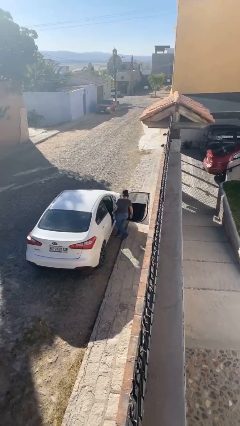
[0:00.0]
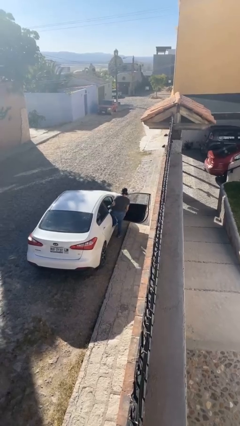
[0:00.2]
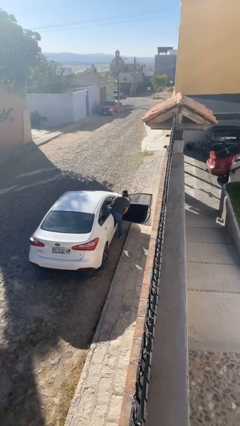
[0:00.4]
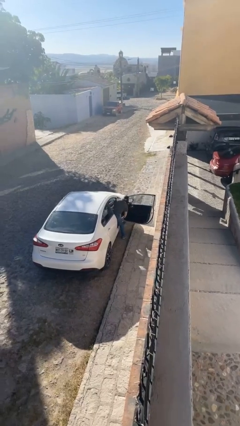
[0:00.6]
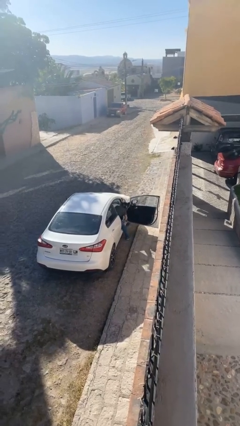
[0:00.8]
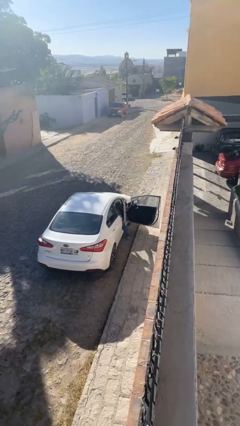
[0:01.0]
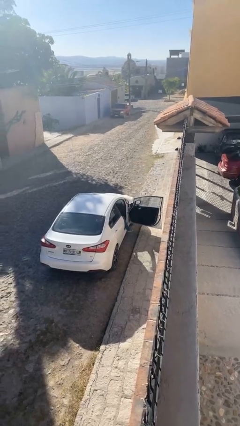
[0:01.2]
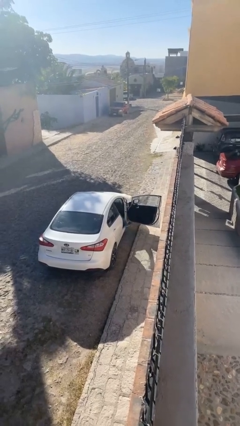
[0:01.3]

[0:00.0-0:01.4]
person enters car

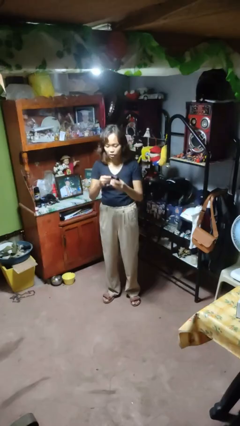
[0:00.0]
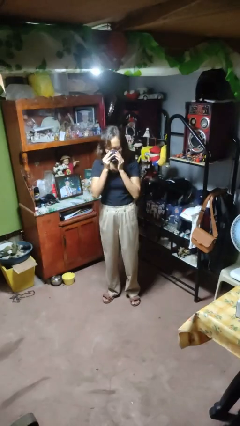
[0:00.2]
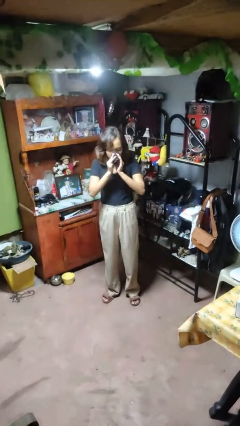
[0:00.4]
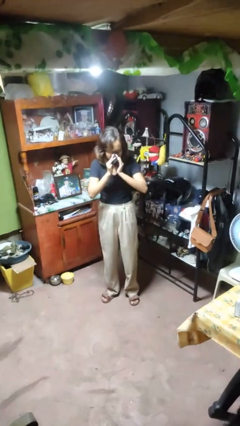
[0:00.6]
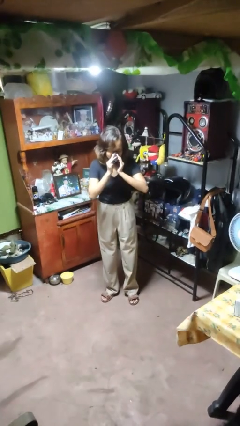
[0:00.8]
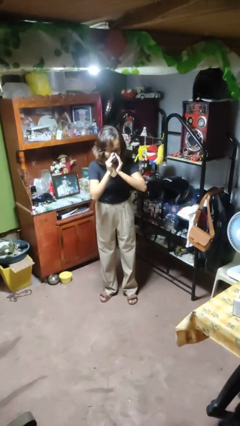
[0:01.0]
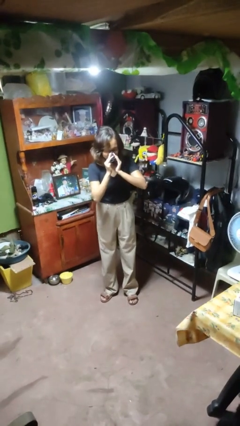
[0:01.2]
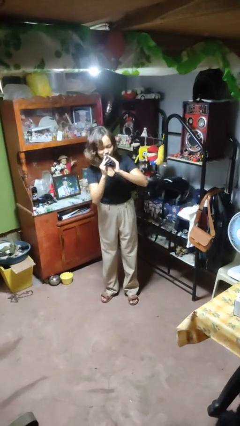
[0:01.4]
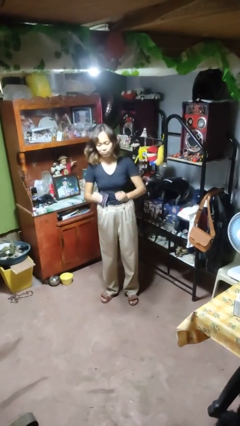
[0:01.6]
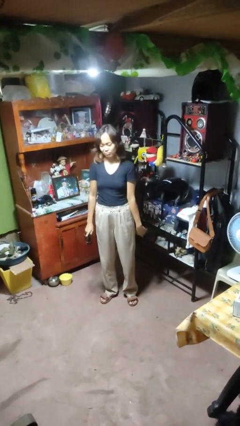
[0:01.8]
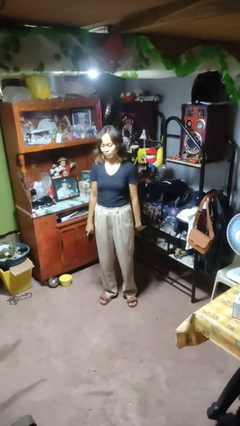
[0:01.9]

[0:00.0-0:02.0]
person blows nose

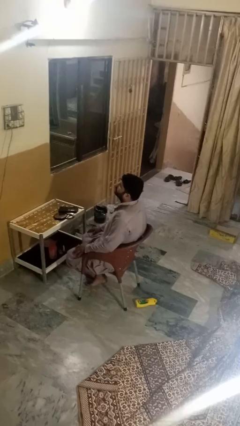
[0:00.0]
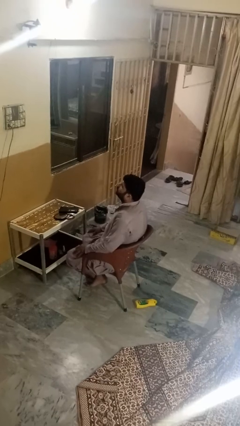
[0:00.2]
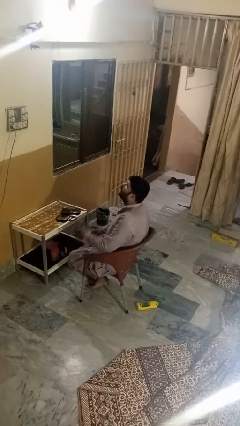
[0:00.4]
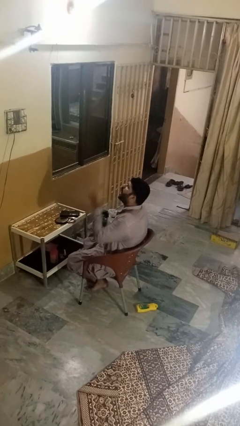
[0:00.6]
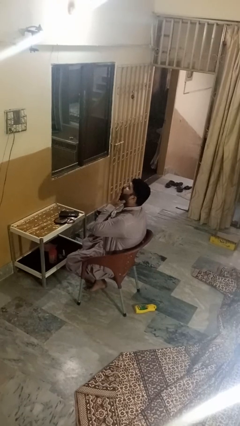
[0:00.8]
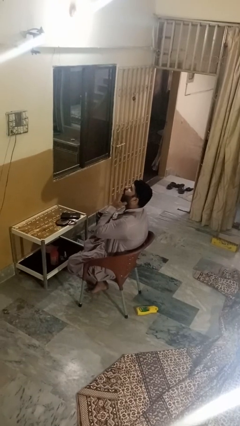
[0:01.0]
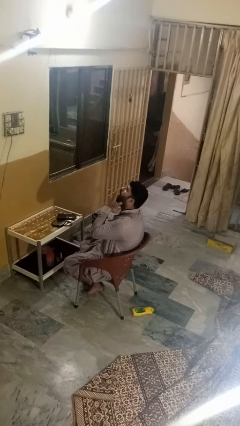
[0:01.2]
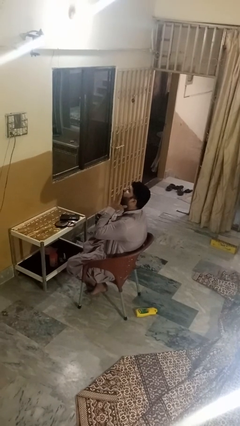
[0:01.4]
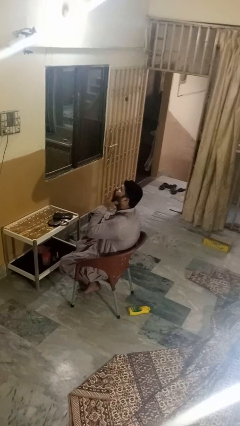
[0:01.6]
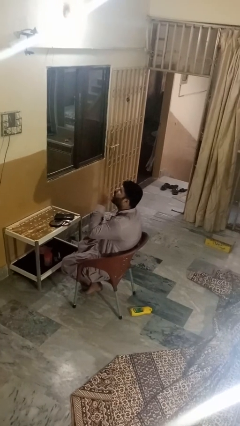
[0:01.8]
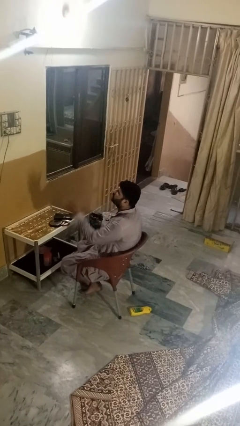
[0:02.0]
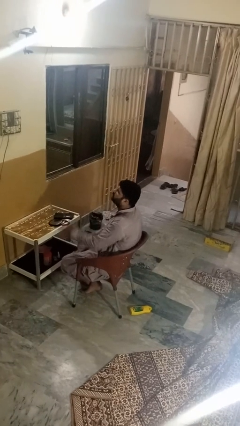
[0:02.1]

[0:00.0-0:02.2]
person yawns

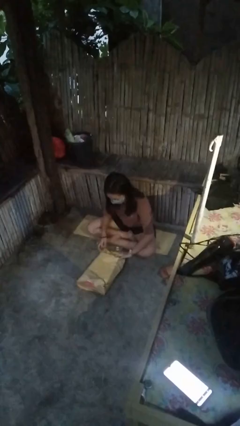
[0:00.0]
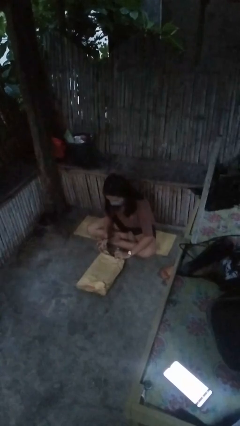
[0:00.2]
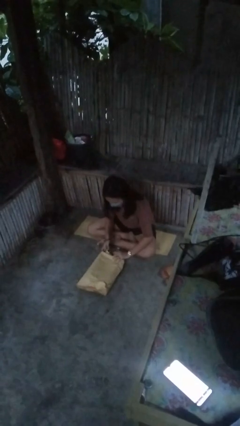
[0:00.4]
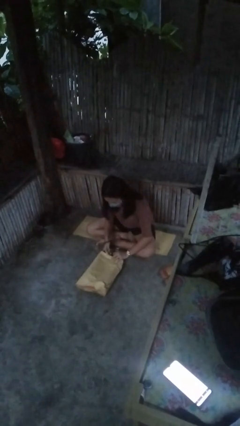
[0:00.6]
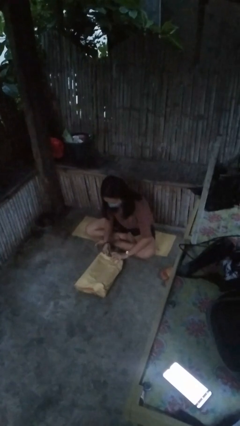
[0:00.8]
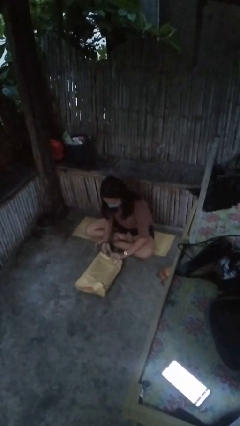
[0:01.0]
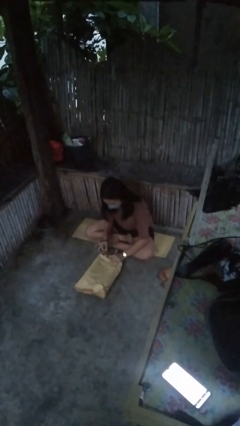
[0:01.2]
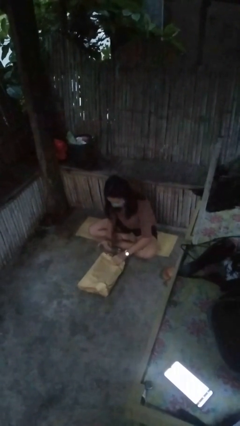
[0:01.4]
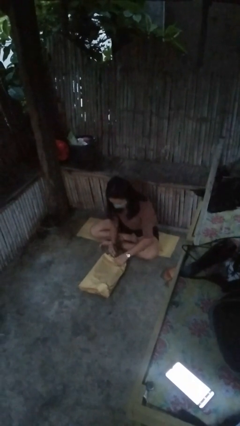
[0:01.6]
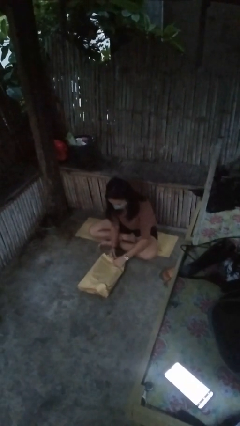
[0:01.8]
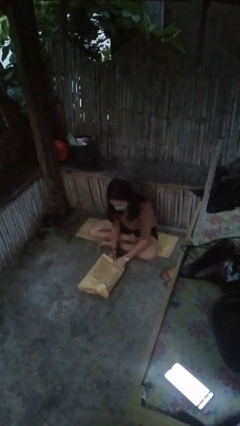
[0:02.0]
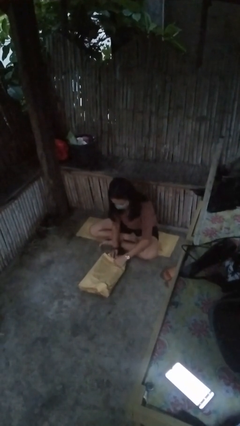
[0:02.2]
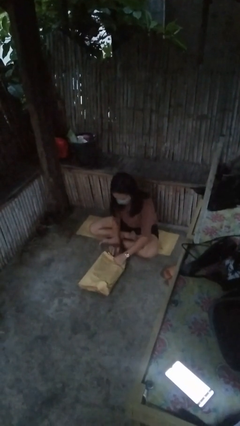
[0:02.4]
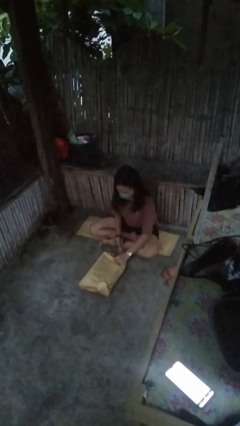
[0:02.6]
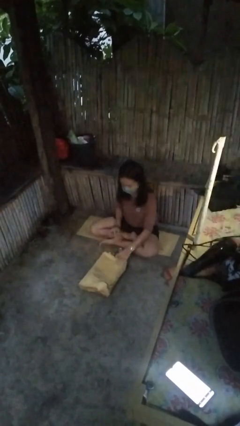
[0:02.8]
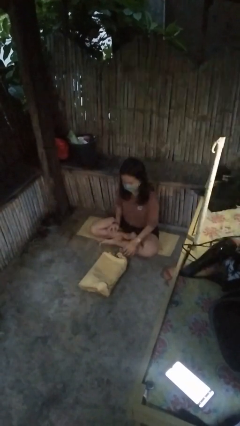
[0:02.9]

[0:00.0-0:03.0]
person wraps box

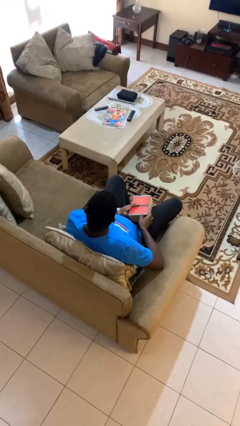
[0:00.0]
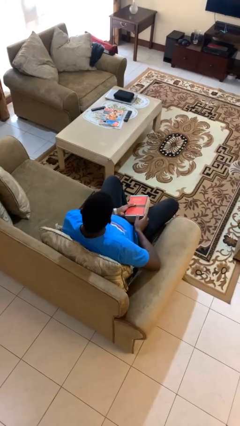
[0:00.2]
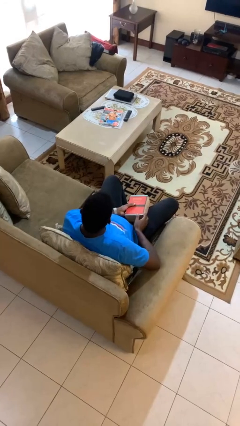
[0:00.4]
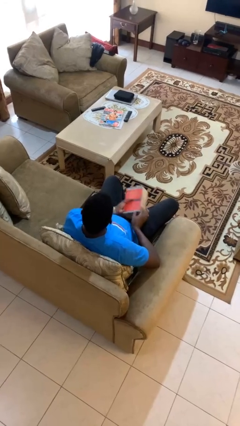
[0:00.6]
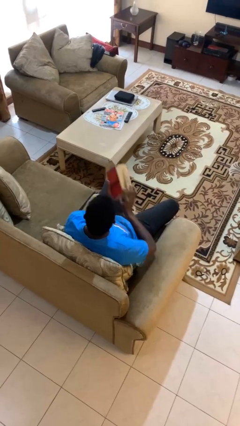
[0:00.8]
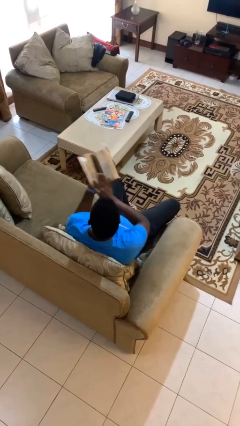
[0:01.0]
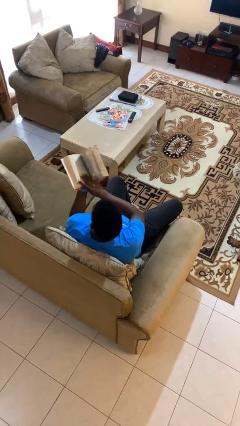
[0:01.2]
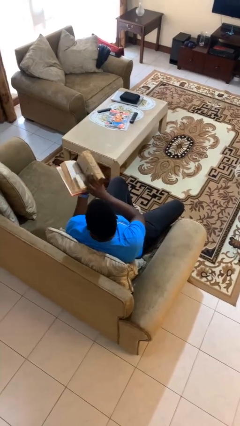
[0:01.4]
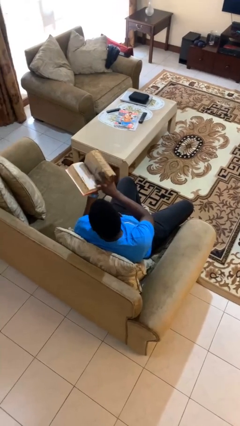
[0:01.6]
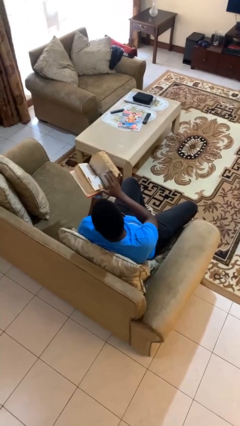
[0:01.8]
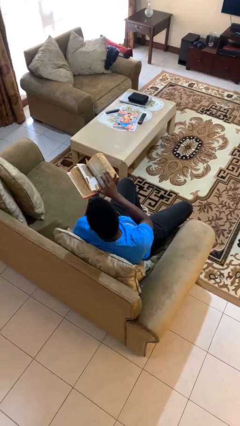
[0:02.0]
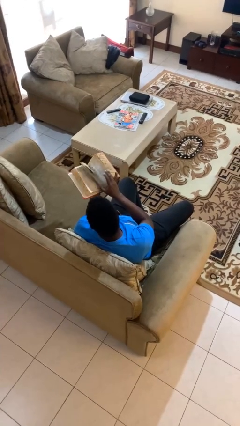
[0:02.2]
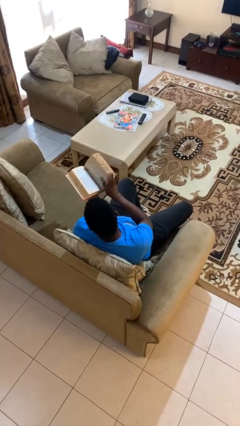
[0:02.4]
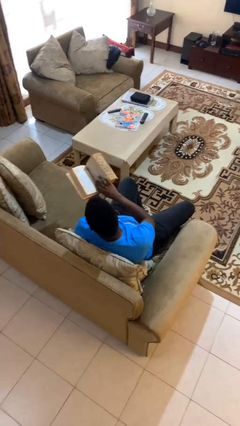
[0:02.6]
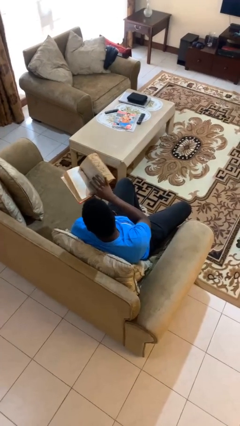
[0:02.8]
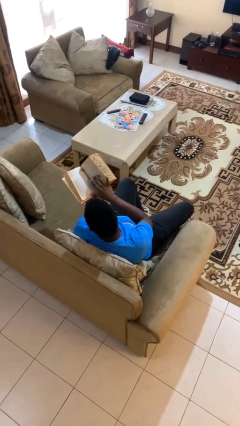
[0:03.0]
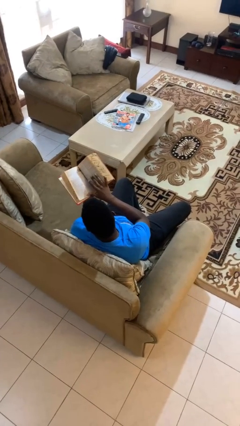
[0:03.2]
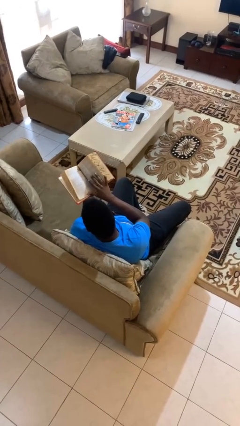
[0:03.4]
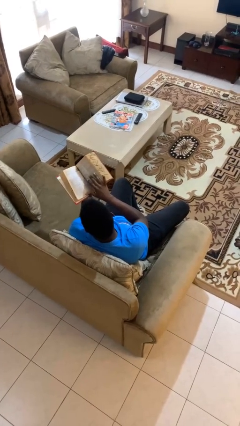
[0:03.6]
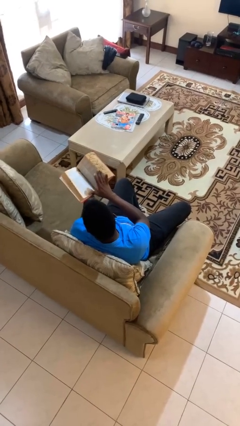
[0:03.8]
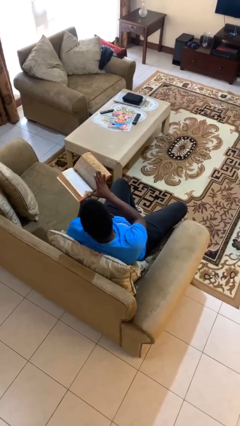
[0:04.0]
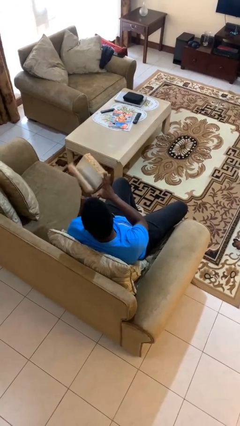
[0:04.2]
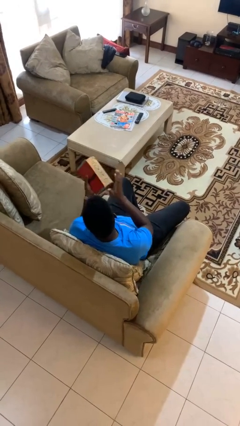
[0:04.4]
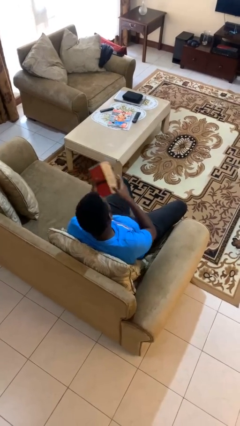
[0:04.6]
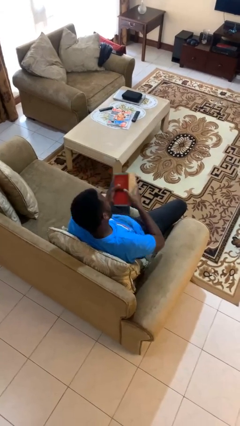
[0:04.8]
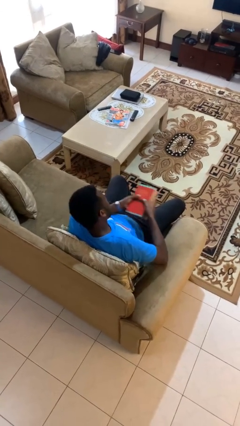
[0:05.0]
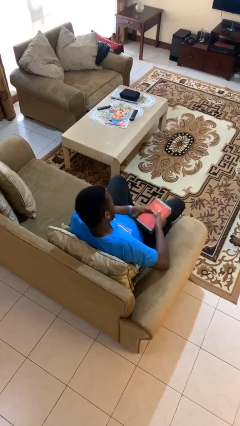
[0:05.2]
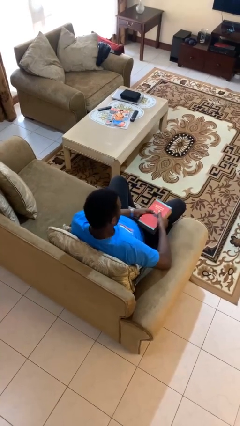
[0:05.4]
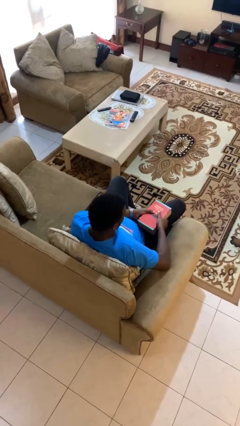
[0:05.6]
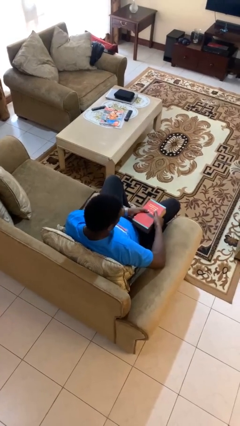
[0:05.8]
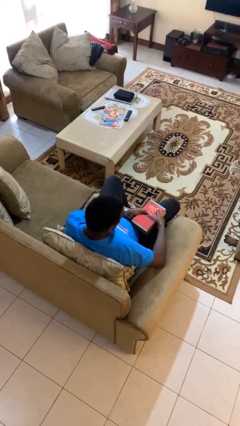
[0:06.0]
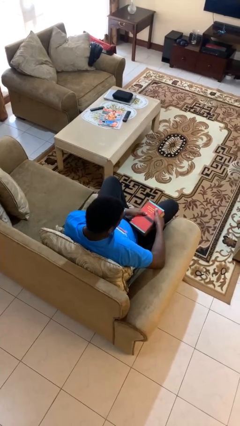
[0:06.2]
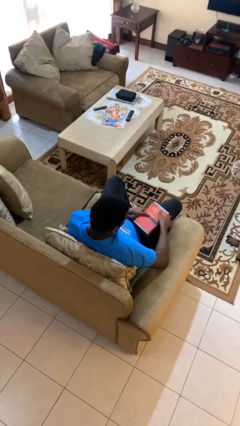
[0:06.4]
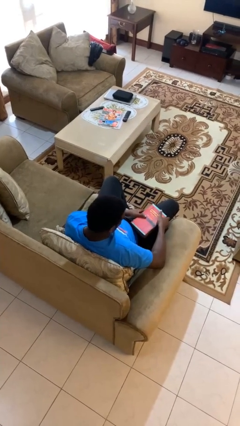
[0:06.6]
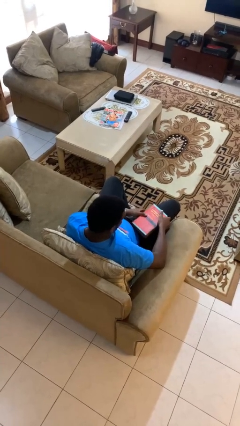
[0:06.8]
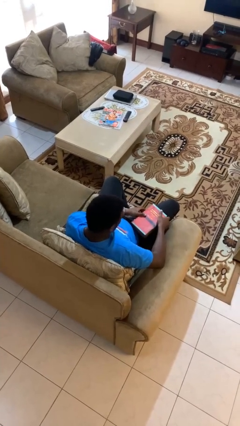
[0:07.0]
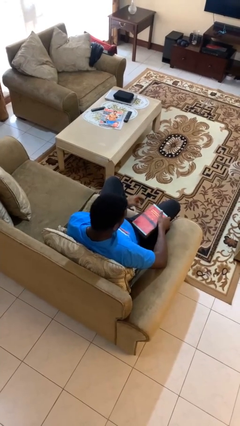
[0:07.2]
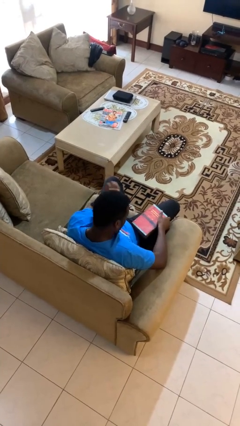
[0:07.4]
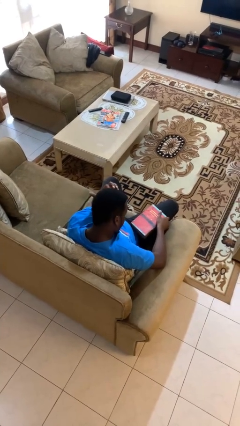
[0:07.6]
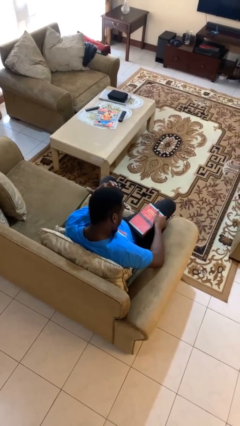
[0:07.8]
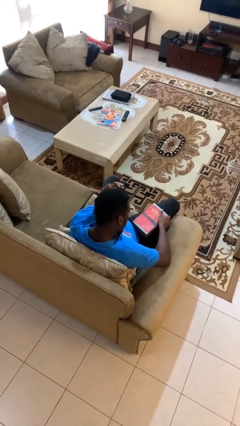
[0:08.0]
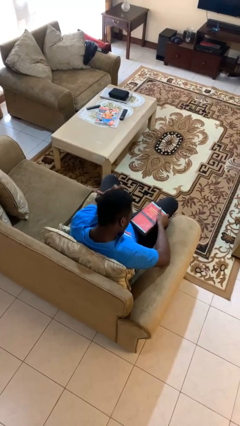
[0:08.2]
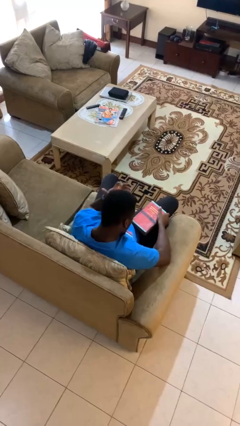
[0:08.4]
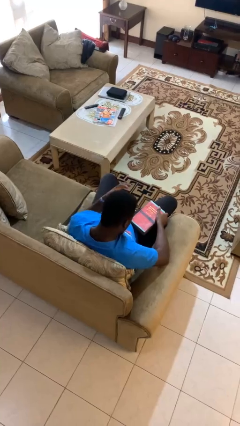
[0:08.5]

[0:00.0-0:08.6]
person reads book

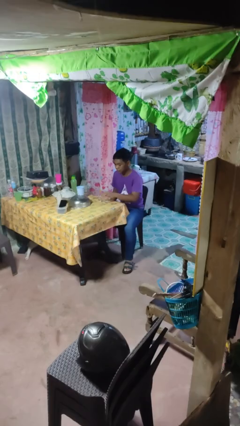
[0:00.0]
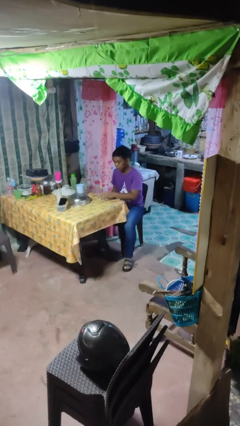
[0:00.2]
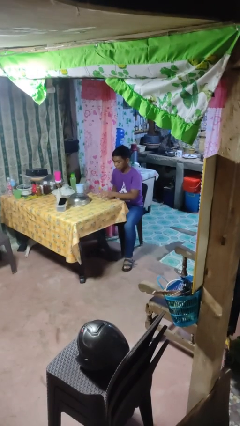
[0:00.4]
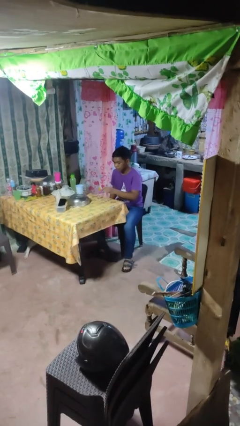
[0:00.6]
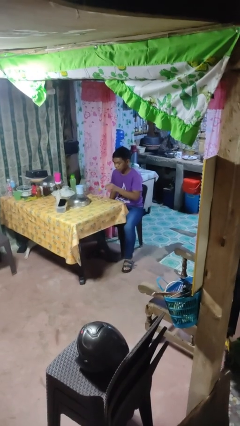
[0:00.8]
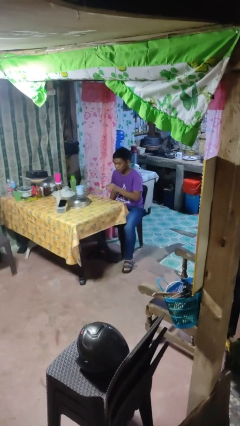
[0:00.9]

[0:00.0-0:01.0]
person picks up object from table
